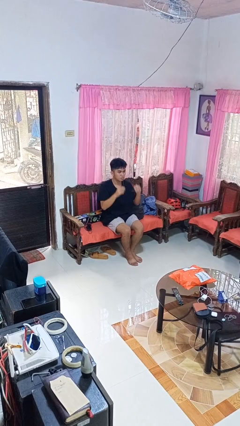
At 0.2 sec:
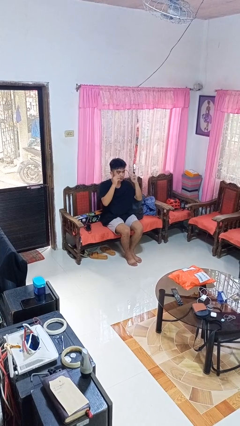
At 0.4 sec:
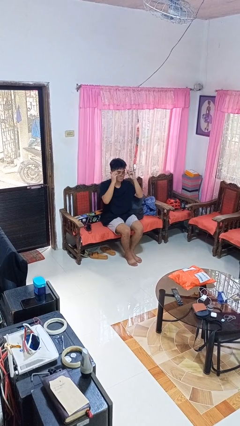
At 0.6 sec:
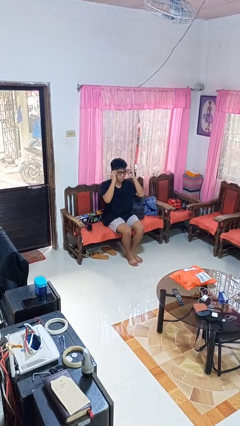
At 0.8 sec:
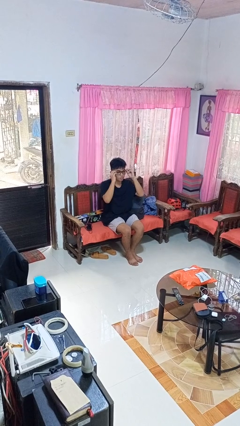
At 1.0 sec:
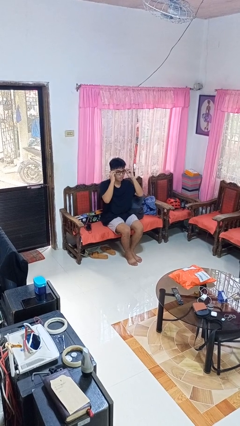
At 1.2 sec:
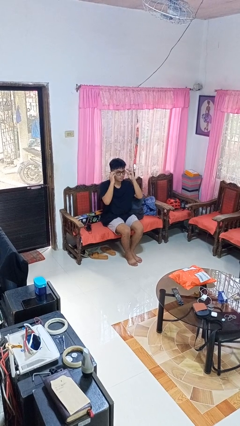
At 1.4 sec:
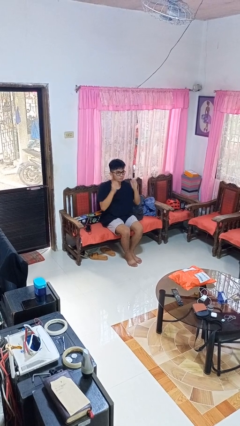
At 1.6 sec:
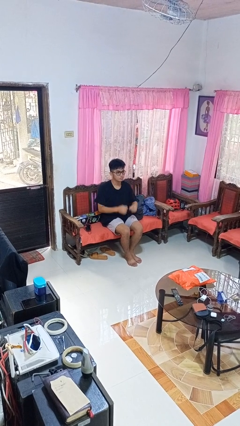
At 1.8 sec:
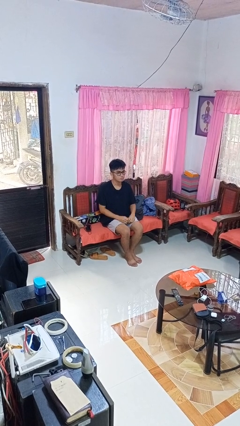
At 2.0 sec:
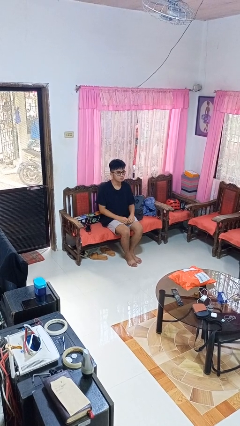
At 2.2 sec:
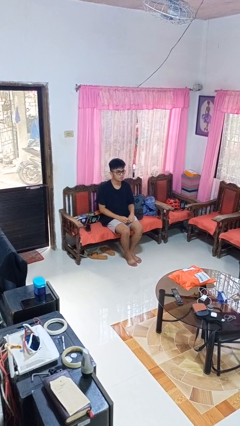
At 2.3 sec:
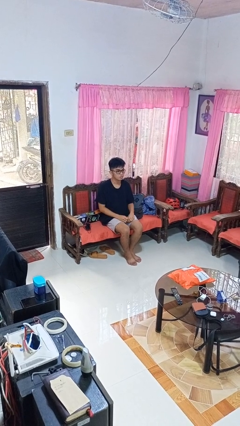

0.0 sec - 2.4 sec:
person puts on glasses

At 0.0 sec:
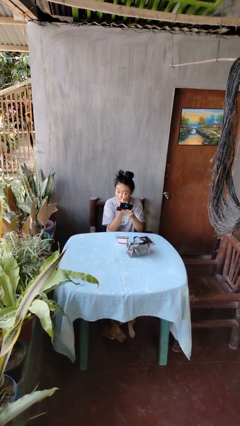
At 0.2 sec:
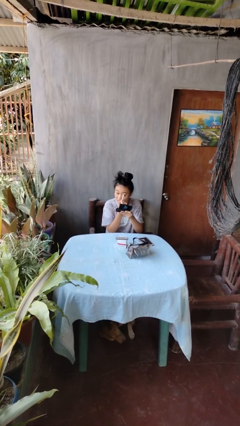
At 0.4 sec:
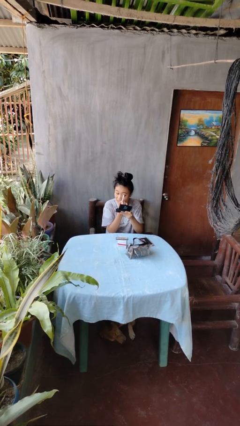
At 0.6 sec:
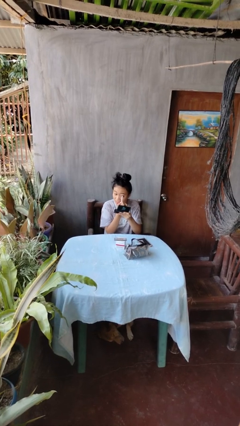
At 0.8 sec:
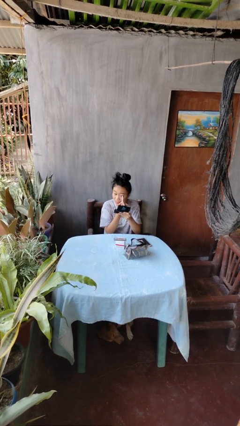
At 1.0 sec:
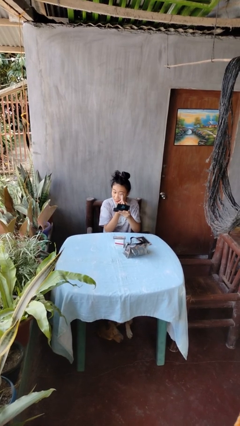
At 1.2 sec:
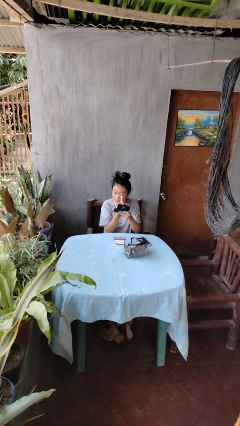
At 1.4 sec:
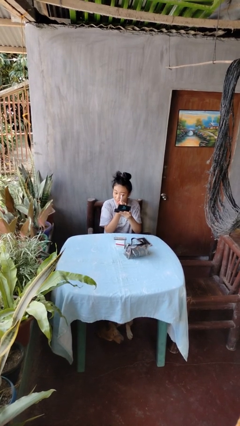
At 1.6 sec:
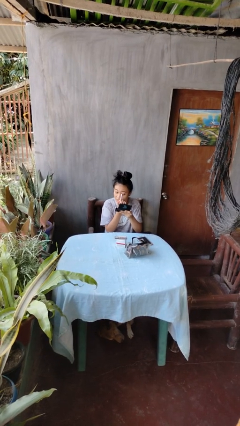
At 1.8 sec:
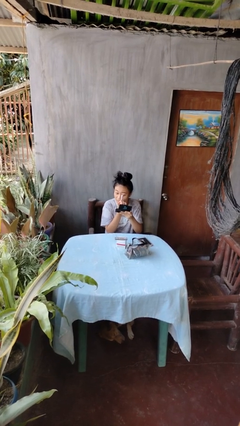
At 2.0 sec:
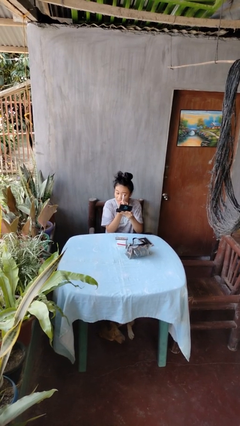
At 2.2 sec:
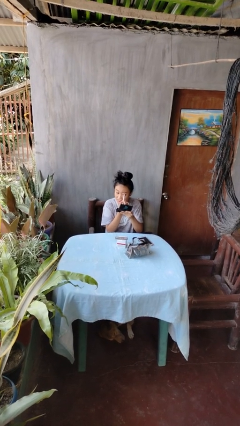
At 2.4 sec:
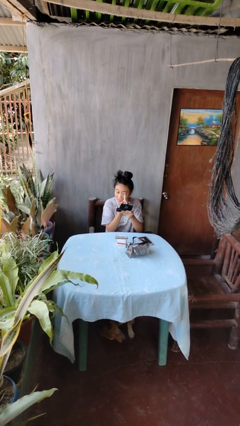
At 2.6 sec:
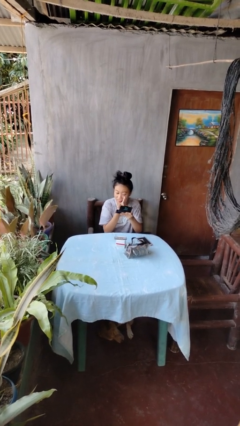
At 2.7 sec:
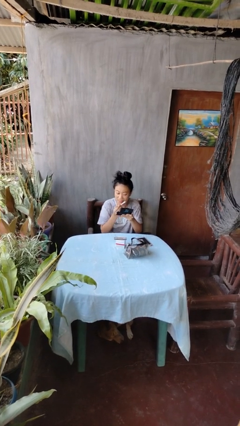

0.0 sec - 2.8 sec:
person applies eye makeup

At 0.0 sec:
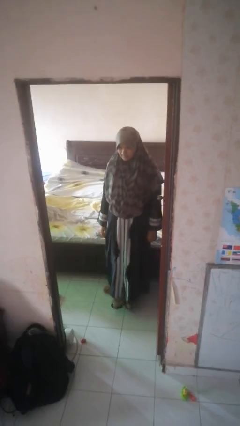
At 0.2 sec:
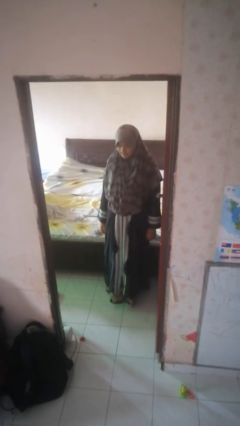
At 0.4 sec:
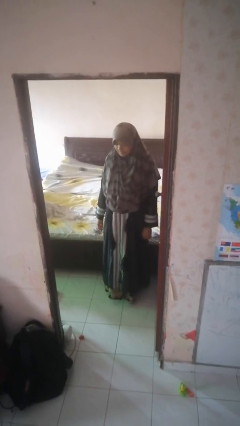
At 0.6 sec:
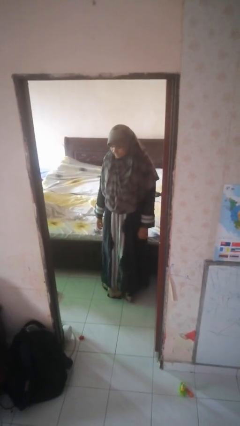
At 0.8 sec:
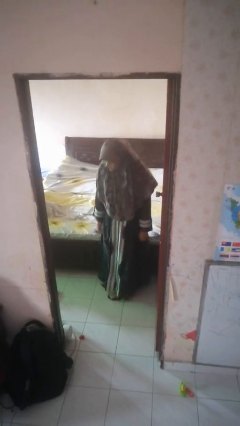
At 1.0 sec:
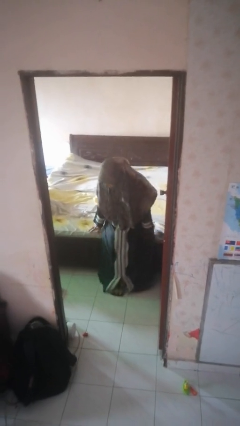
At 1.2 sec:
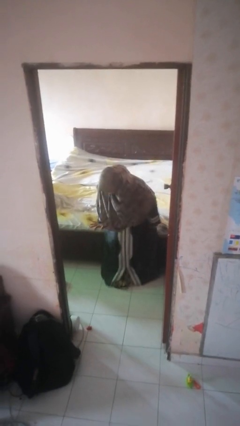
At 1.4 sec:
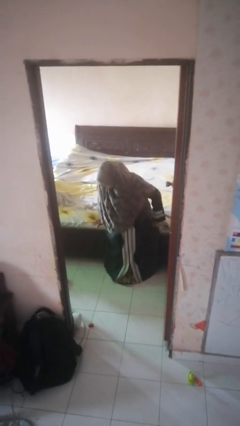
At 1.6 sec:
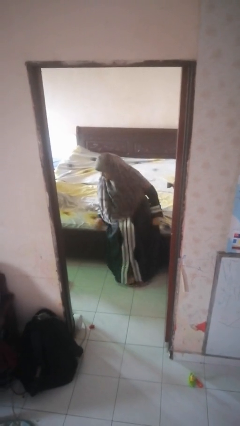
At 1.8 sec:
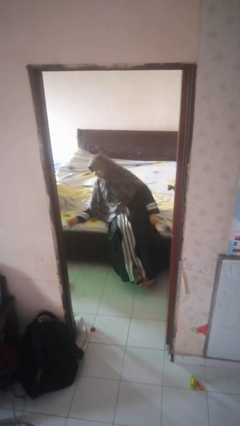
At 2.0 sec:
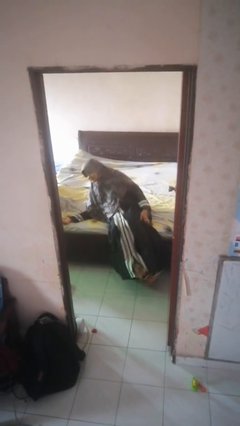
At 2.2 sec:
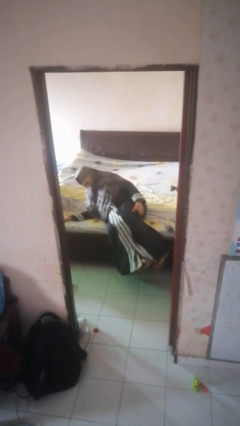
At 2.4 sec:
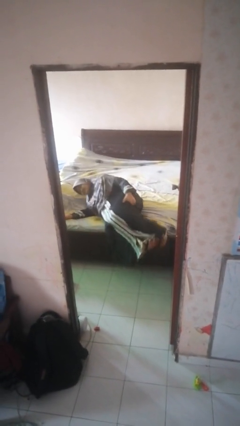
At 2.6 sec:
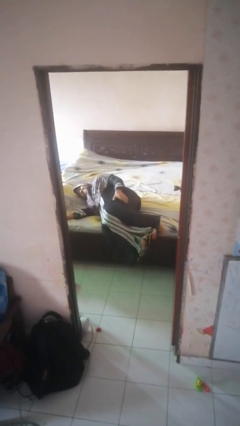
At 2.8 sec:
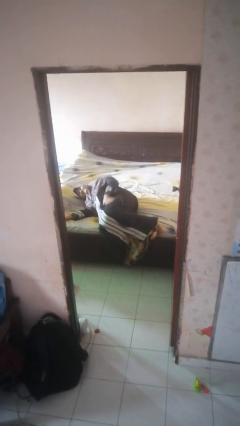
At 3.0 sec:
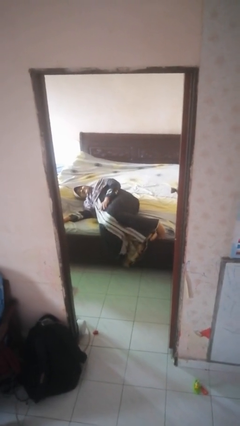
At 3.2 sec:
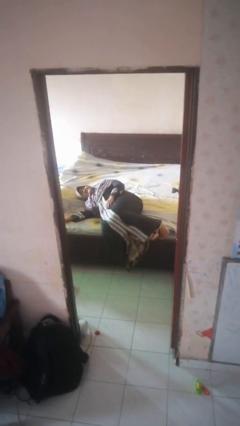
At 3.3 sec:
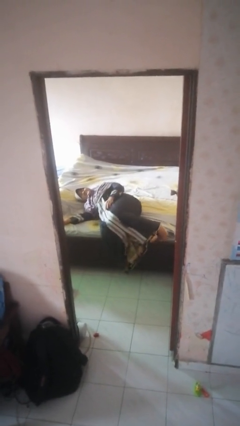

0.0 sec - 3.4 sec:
person lies down on bed

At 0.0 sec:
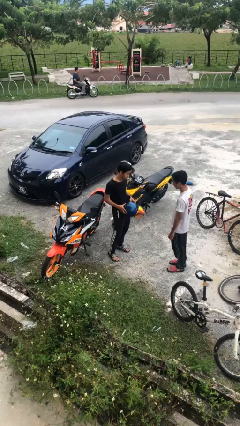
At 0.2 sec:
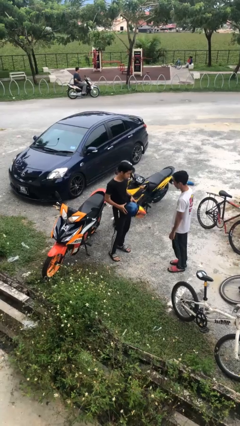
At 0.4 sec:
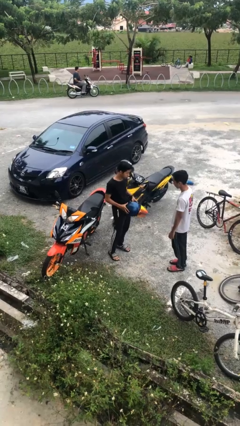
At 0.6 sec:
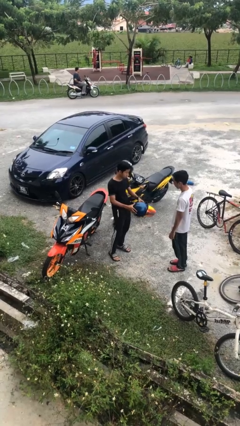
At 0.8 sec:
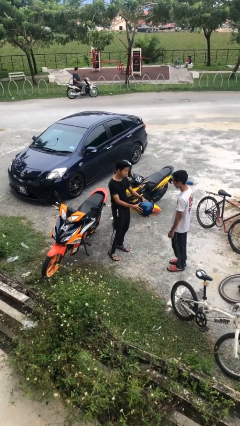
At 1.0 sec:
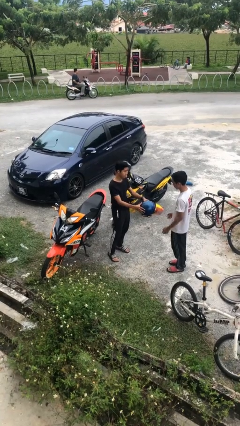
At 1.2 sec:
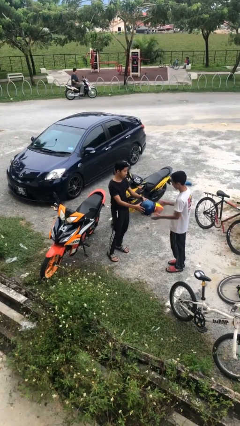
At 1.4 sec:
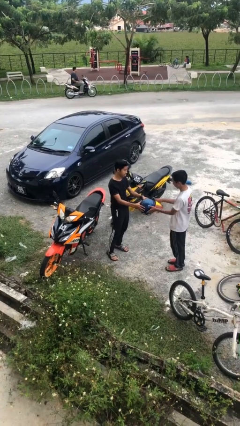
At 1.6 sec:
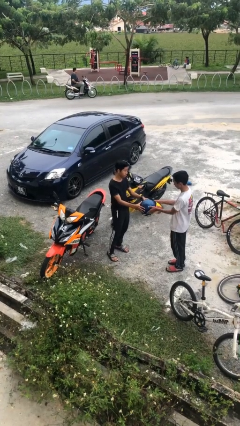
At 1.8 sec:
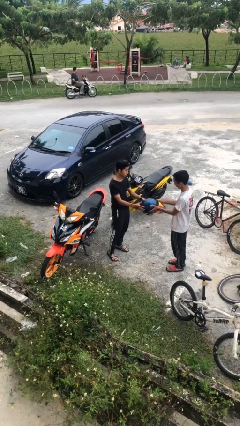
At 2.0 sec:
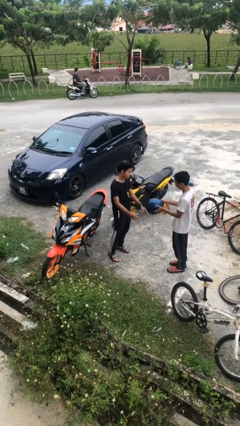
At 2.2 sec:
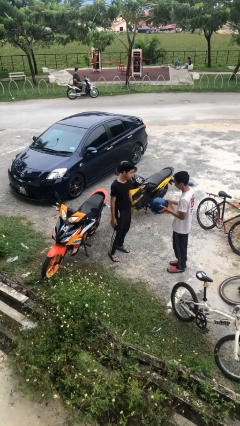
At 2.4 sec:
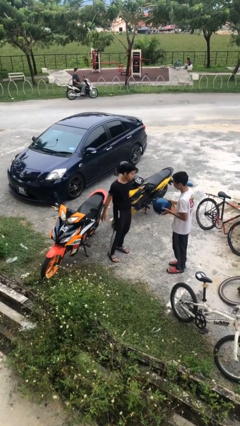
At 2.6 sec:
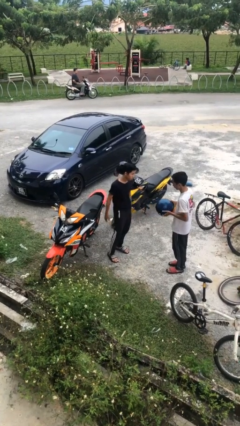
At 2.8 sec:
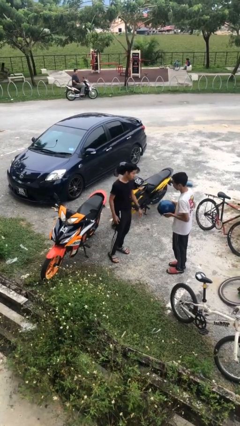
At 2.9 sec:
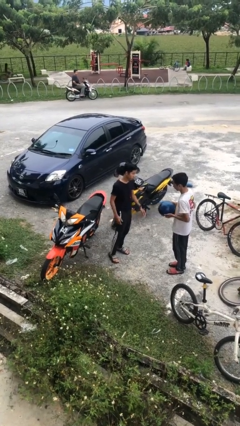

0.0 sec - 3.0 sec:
person transfers object to person

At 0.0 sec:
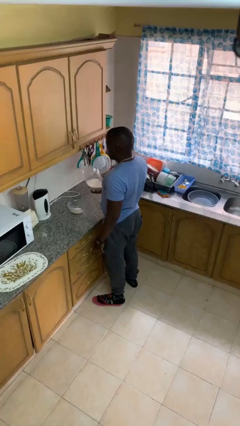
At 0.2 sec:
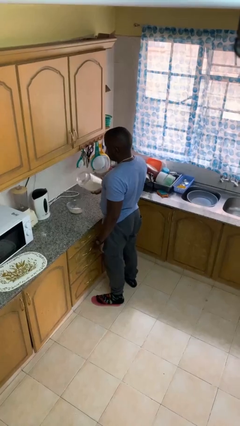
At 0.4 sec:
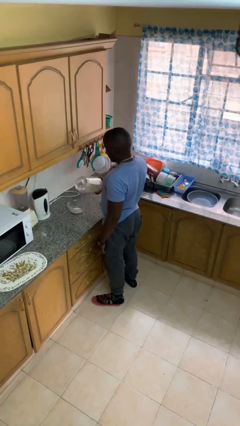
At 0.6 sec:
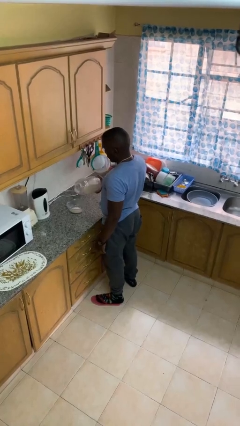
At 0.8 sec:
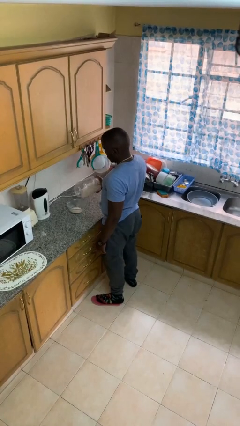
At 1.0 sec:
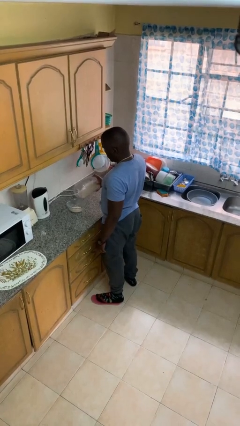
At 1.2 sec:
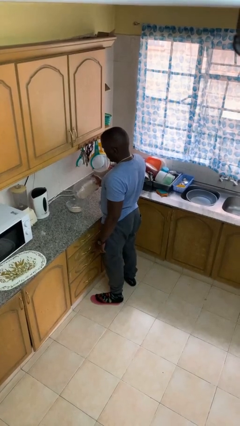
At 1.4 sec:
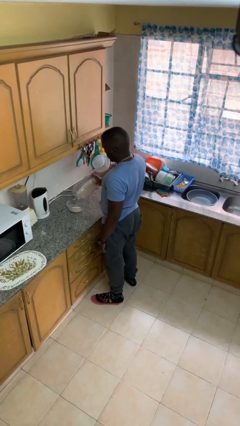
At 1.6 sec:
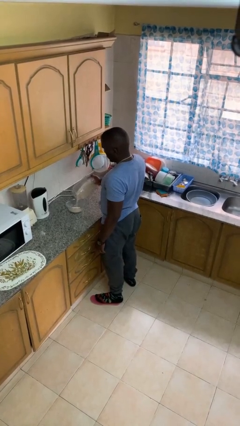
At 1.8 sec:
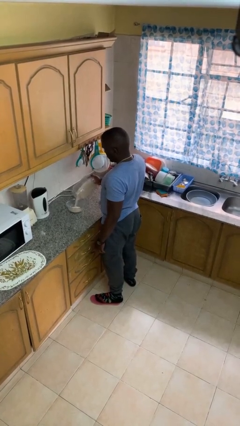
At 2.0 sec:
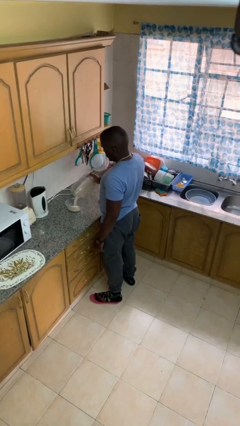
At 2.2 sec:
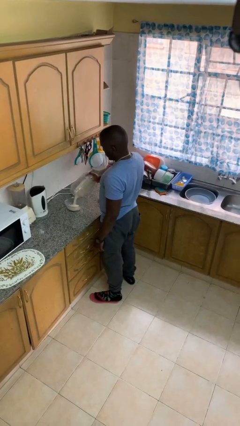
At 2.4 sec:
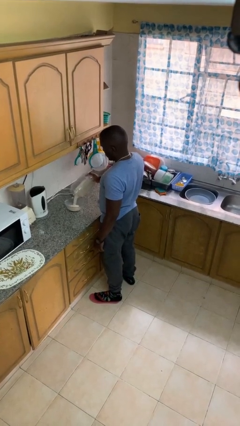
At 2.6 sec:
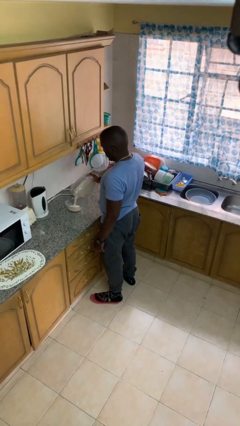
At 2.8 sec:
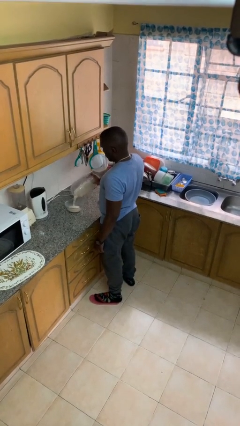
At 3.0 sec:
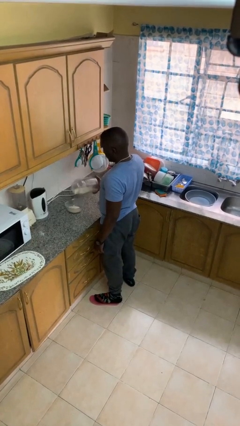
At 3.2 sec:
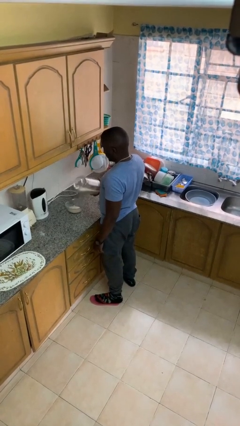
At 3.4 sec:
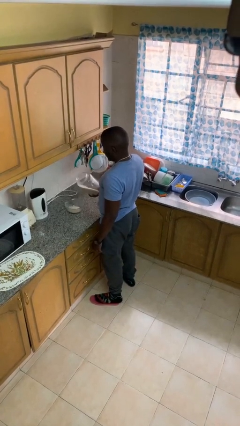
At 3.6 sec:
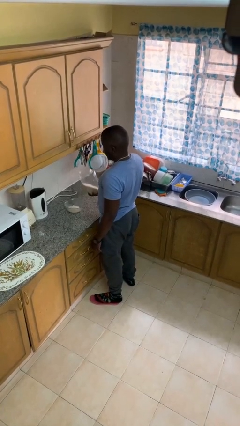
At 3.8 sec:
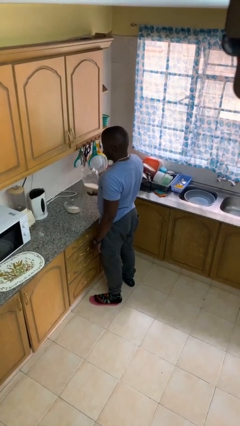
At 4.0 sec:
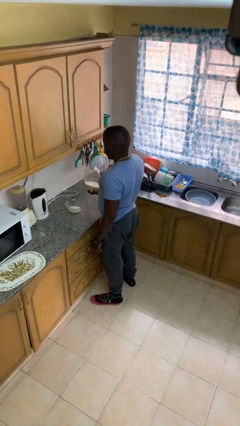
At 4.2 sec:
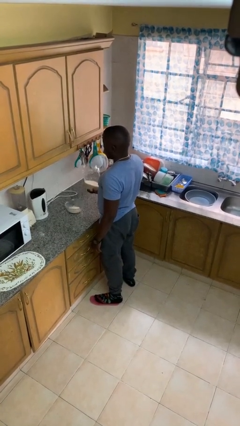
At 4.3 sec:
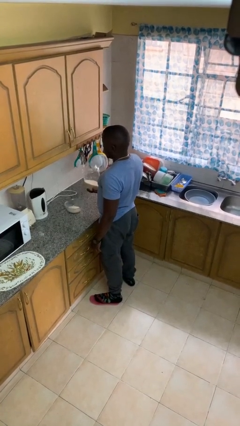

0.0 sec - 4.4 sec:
person pours into bowl

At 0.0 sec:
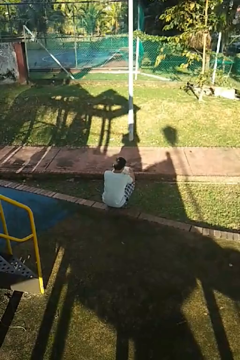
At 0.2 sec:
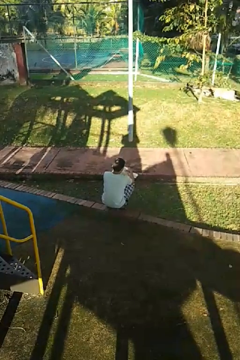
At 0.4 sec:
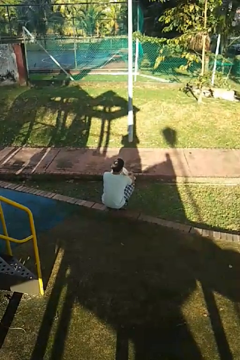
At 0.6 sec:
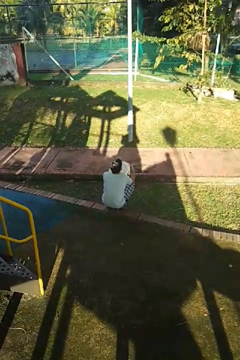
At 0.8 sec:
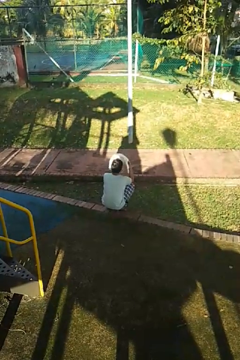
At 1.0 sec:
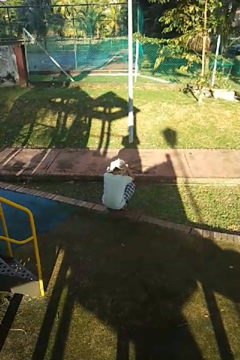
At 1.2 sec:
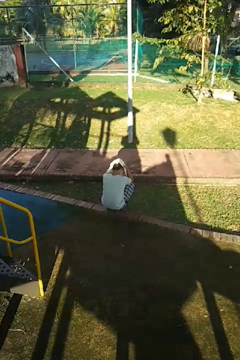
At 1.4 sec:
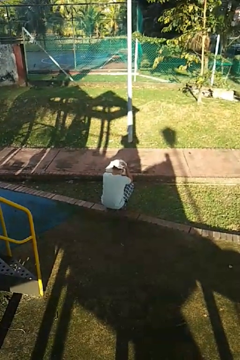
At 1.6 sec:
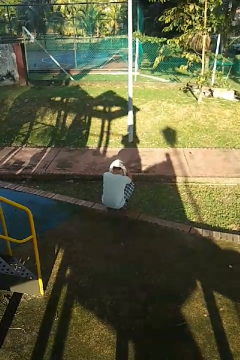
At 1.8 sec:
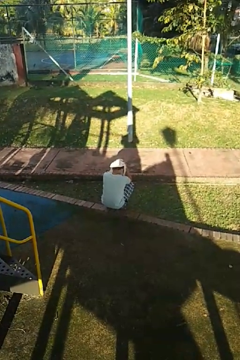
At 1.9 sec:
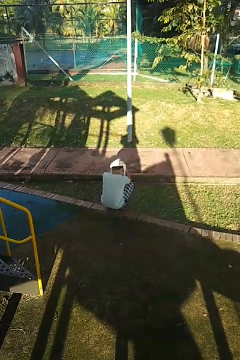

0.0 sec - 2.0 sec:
person dries hair with towel
